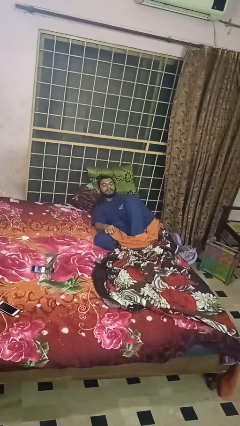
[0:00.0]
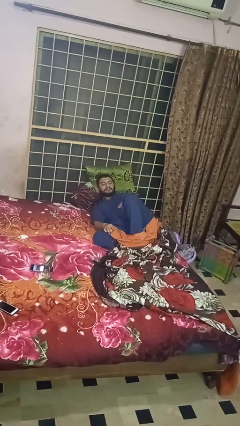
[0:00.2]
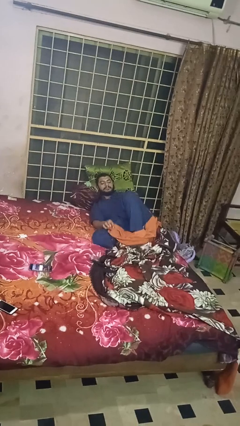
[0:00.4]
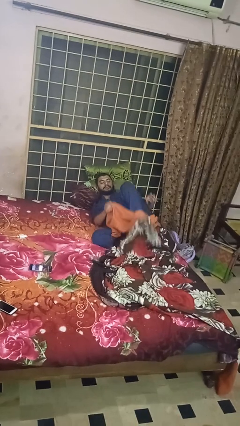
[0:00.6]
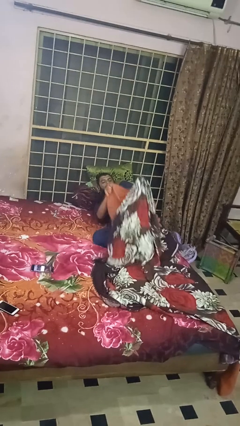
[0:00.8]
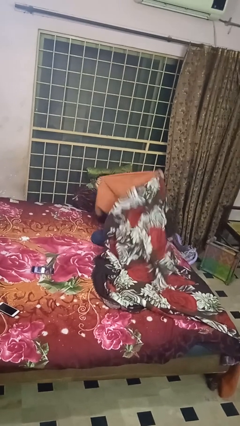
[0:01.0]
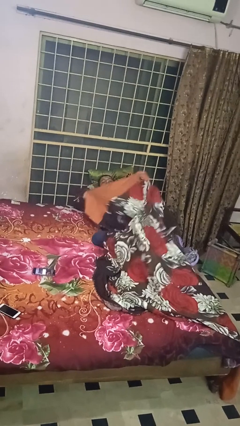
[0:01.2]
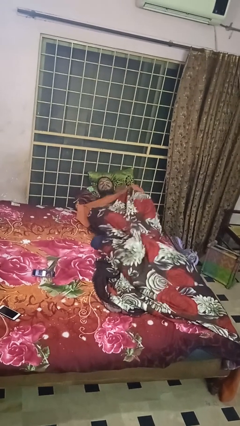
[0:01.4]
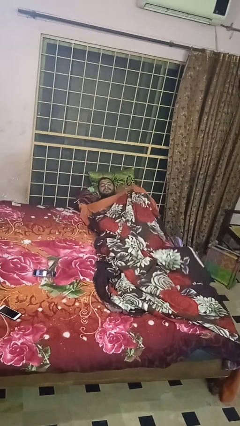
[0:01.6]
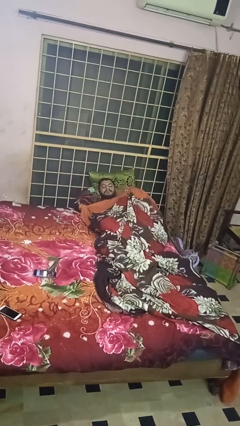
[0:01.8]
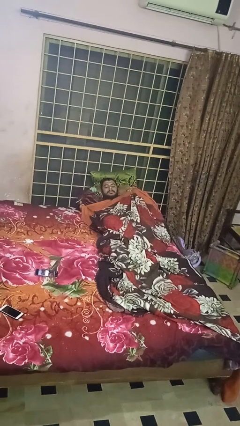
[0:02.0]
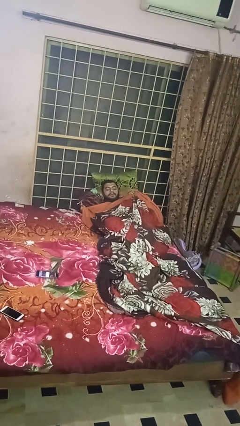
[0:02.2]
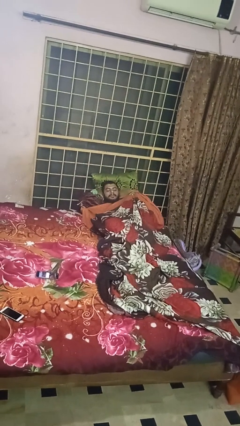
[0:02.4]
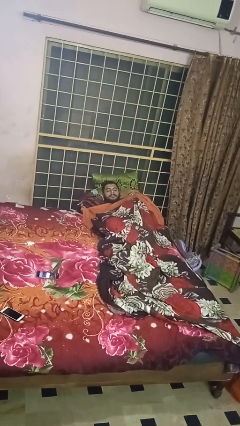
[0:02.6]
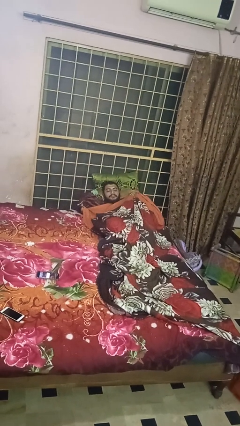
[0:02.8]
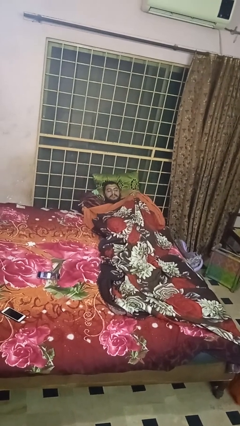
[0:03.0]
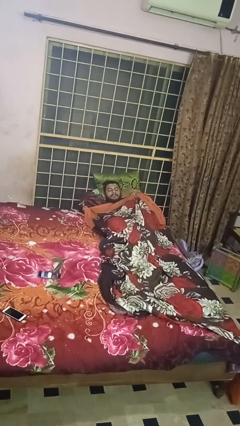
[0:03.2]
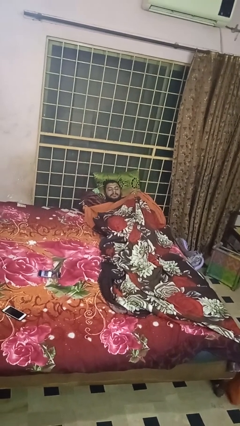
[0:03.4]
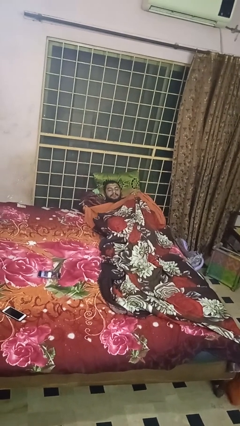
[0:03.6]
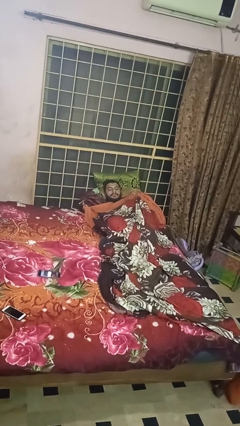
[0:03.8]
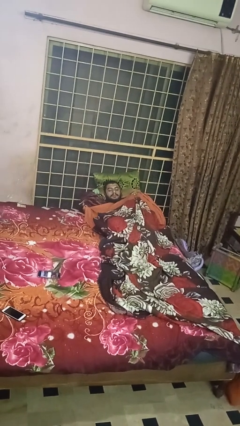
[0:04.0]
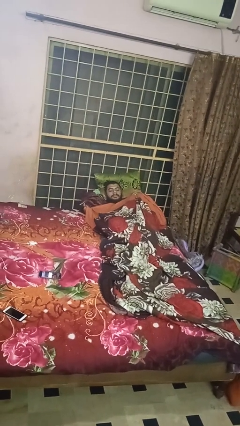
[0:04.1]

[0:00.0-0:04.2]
person covers with bedsheets

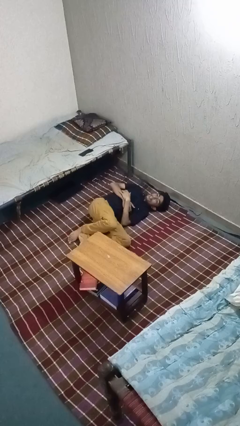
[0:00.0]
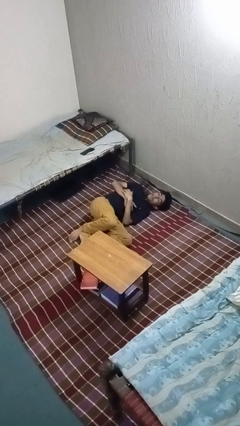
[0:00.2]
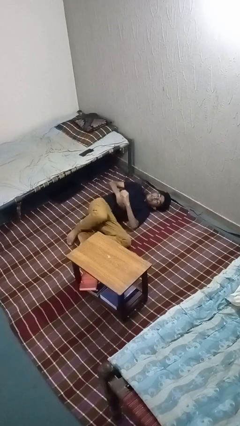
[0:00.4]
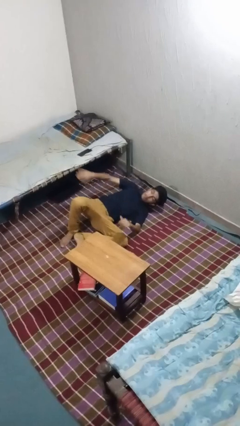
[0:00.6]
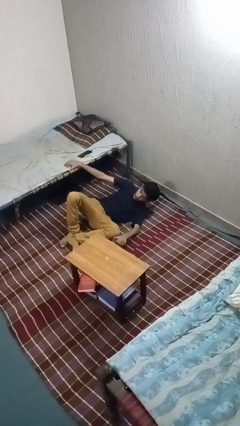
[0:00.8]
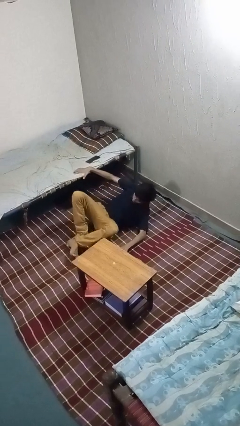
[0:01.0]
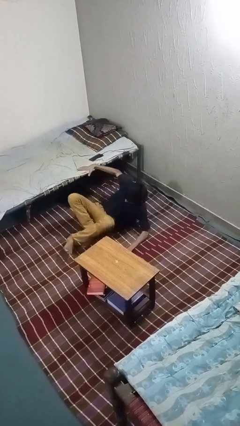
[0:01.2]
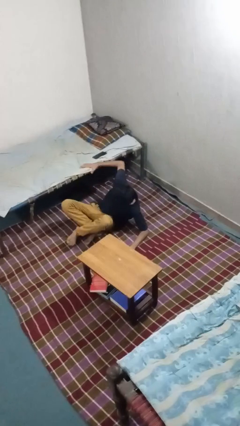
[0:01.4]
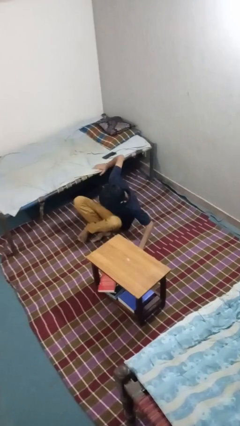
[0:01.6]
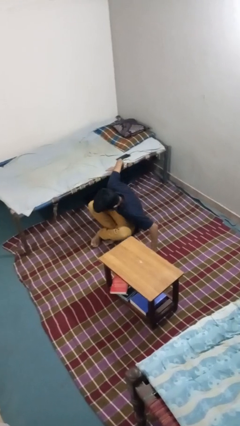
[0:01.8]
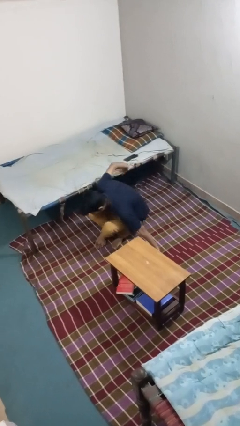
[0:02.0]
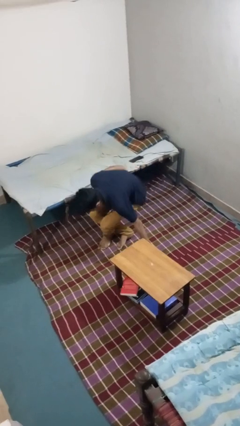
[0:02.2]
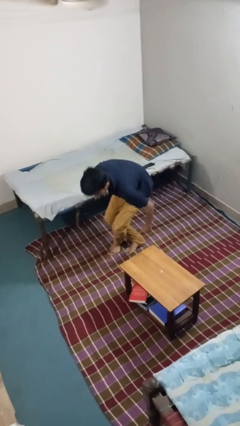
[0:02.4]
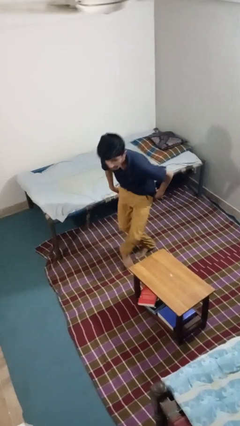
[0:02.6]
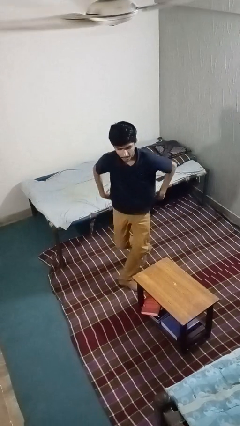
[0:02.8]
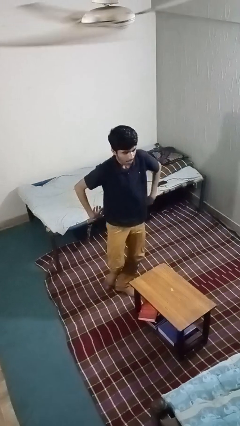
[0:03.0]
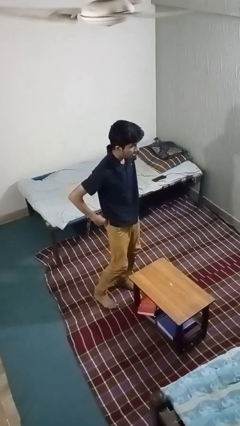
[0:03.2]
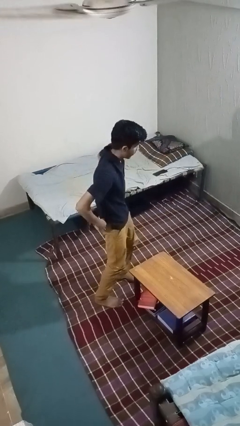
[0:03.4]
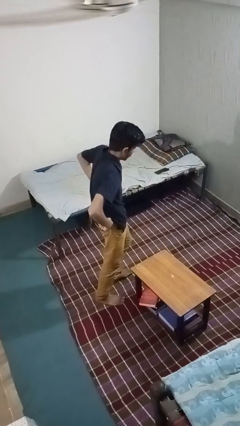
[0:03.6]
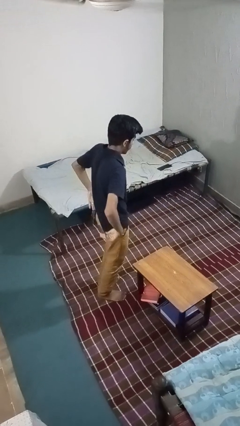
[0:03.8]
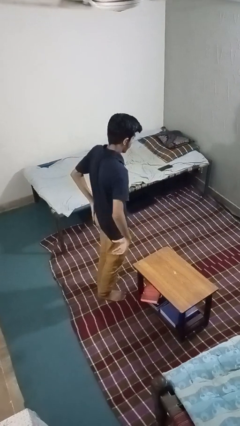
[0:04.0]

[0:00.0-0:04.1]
person stands up from floor

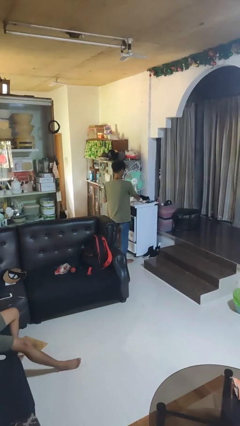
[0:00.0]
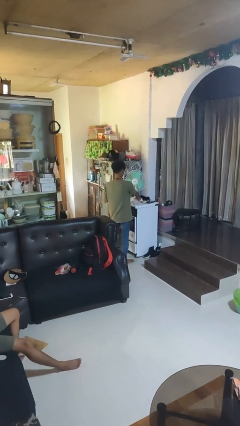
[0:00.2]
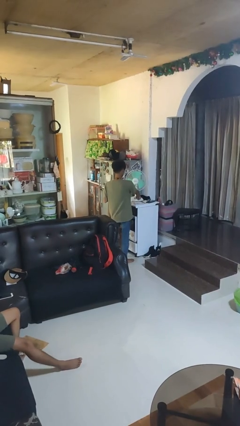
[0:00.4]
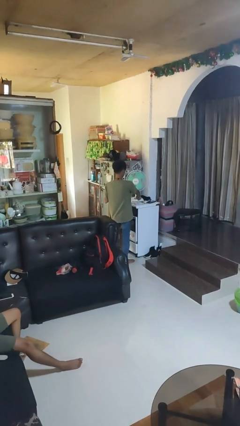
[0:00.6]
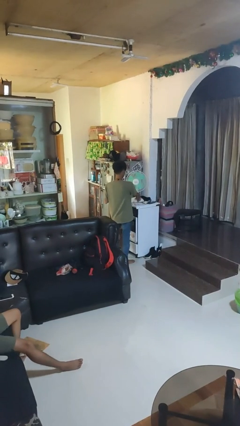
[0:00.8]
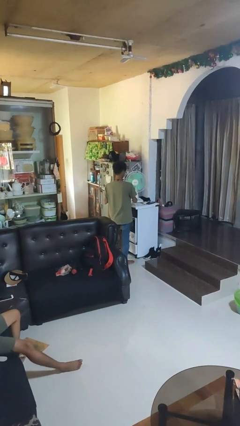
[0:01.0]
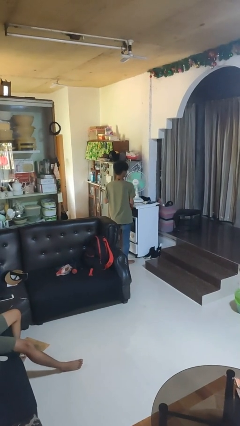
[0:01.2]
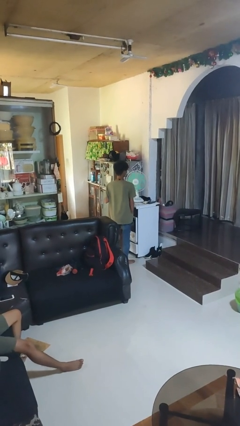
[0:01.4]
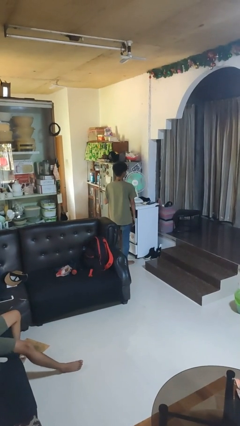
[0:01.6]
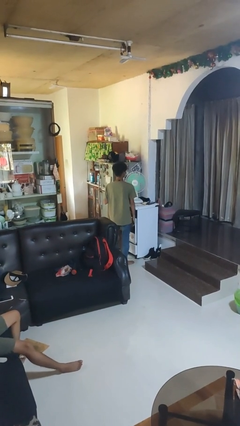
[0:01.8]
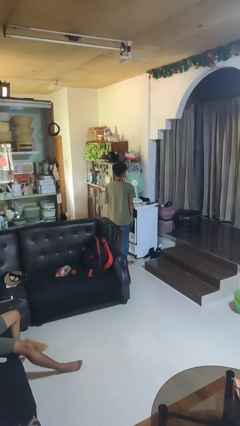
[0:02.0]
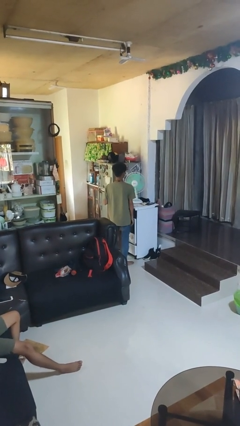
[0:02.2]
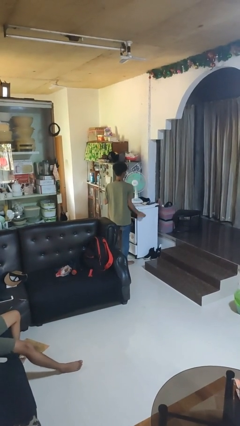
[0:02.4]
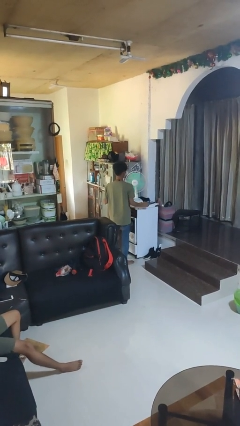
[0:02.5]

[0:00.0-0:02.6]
person turns on fan

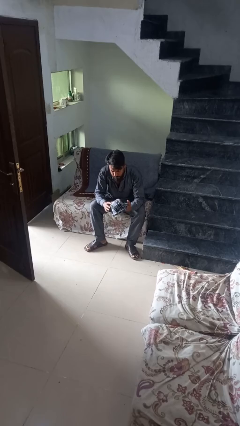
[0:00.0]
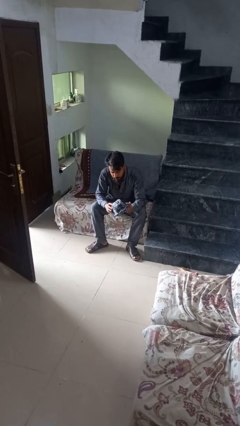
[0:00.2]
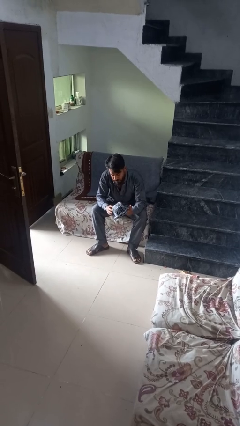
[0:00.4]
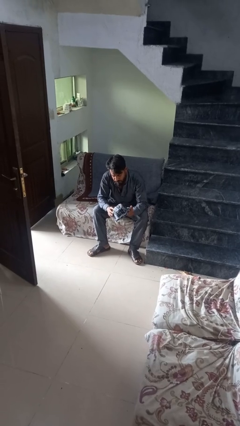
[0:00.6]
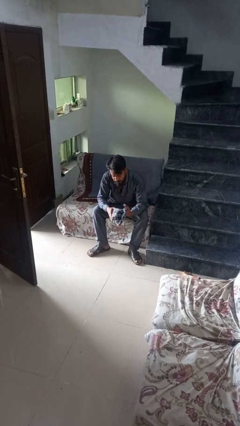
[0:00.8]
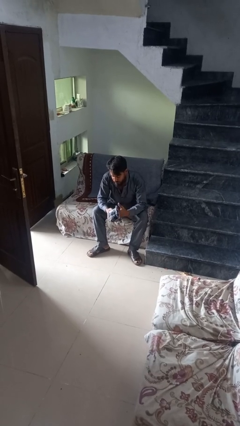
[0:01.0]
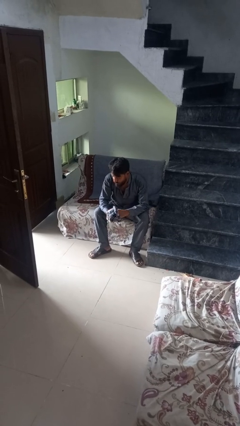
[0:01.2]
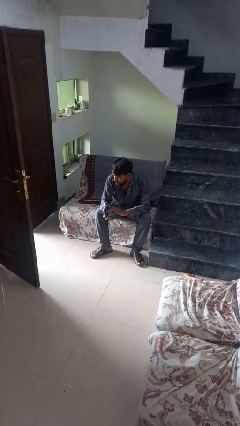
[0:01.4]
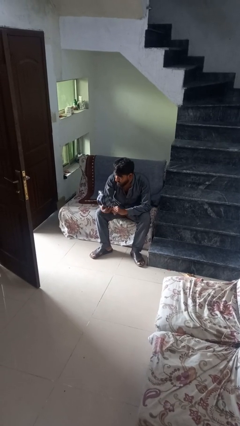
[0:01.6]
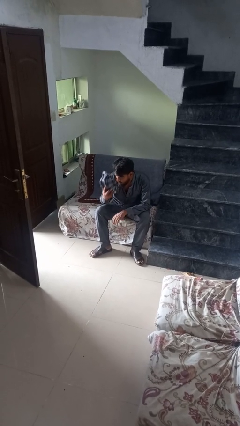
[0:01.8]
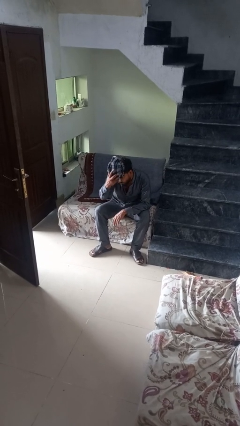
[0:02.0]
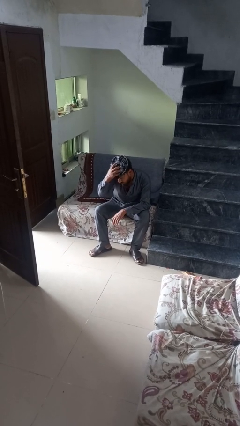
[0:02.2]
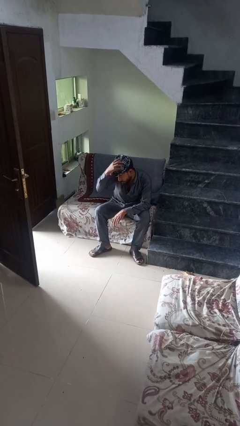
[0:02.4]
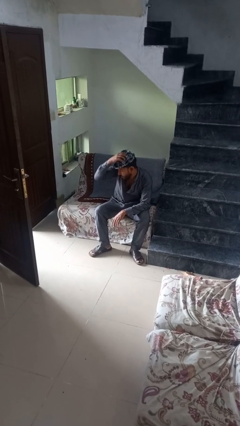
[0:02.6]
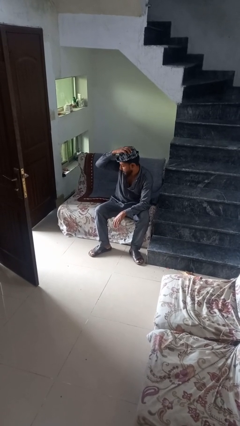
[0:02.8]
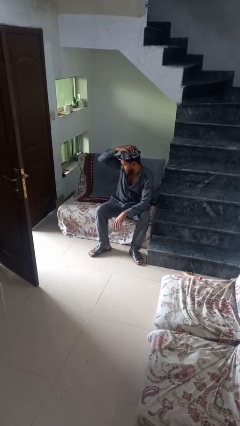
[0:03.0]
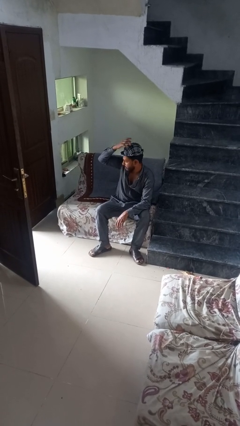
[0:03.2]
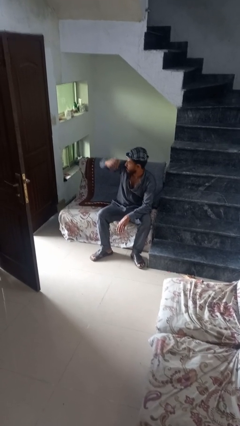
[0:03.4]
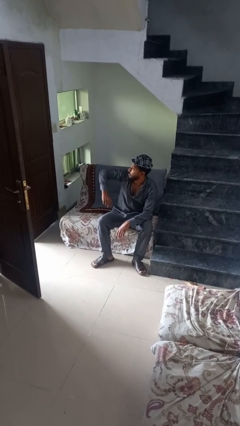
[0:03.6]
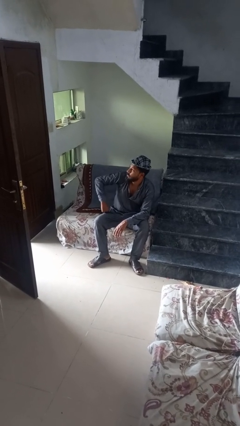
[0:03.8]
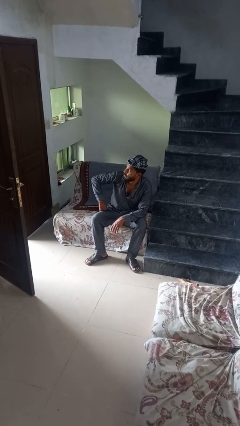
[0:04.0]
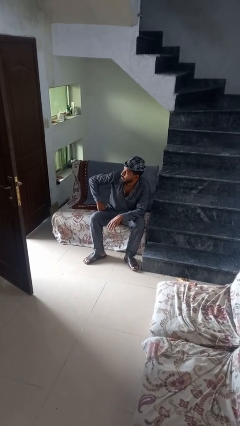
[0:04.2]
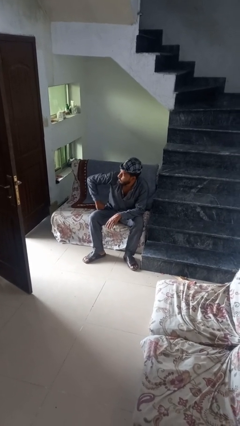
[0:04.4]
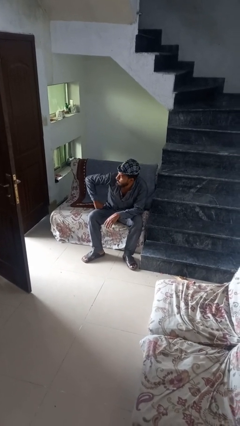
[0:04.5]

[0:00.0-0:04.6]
person puts on hat

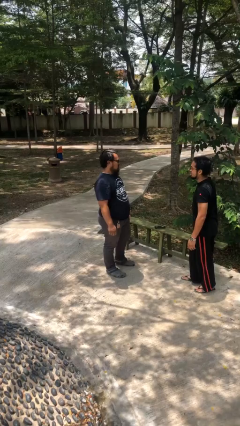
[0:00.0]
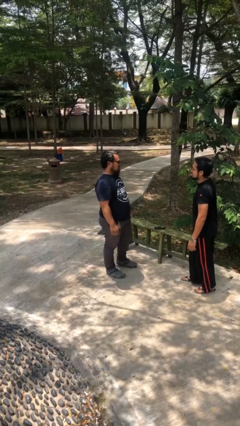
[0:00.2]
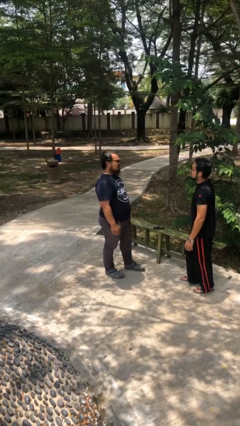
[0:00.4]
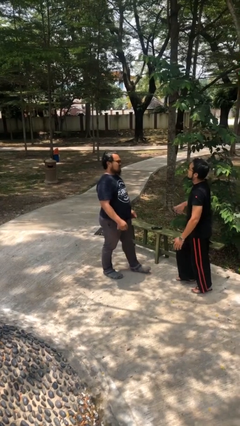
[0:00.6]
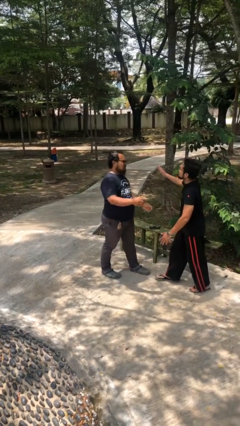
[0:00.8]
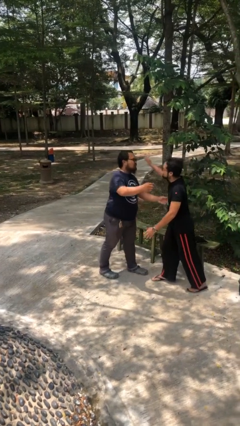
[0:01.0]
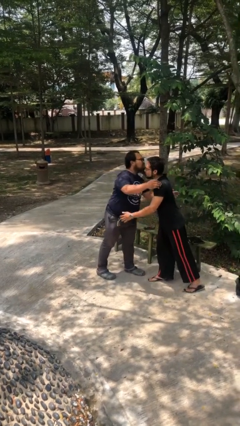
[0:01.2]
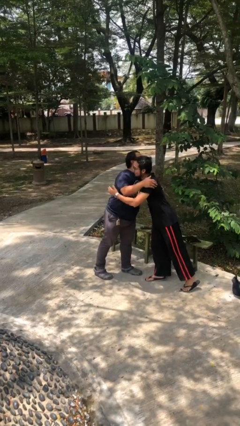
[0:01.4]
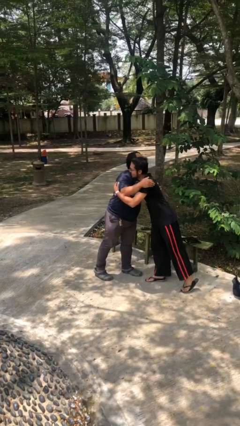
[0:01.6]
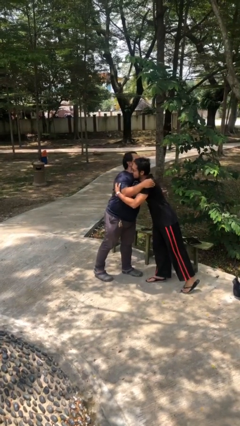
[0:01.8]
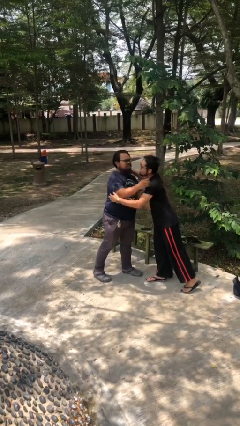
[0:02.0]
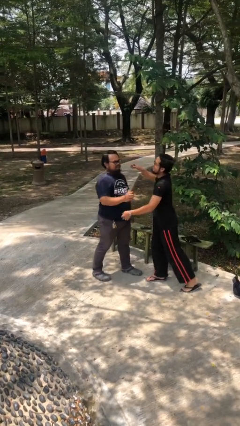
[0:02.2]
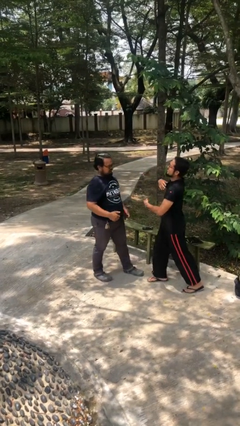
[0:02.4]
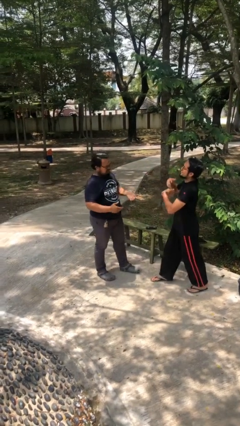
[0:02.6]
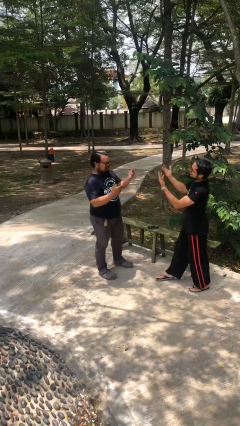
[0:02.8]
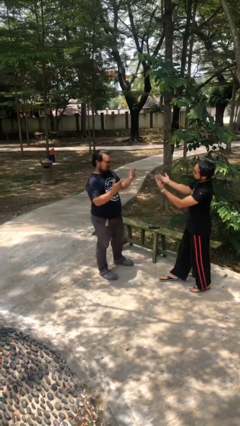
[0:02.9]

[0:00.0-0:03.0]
person embraces person
